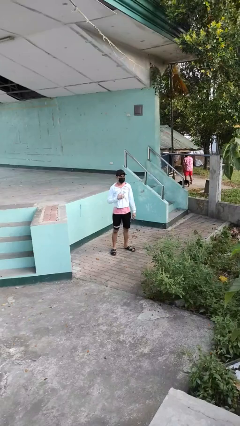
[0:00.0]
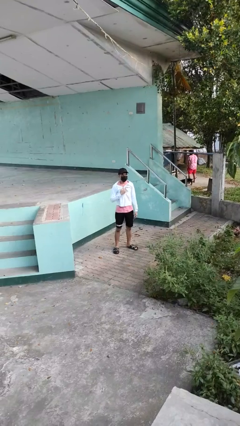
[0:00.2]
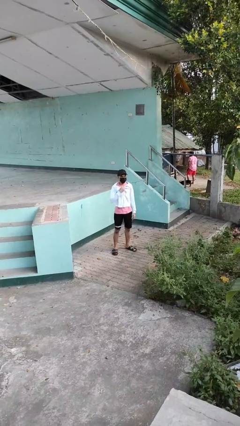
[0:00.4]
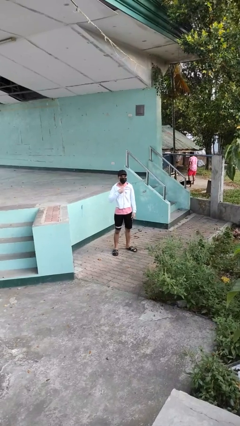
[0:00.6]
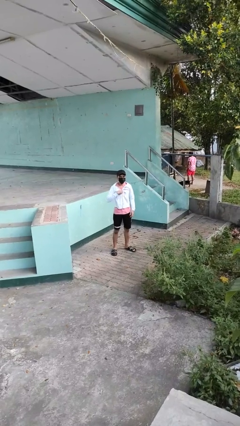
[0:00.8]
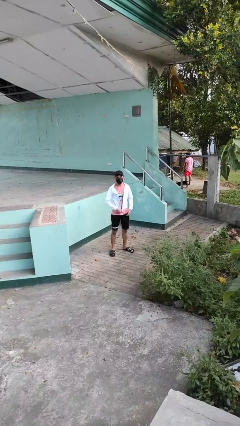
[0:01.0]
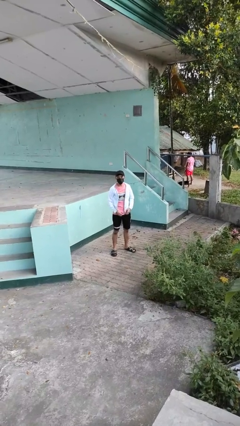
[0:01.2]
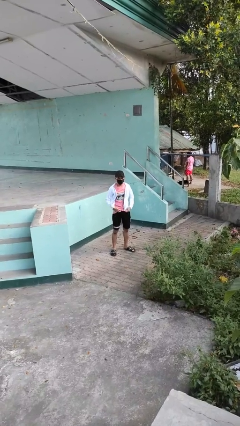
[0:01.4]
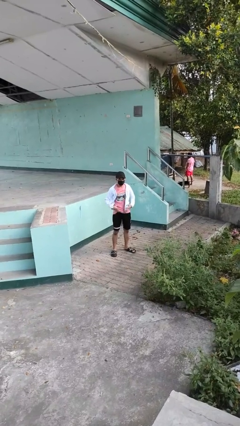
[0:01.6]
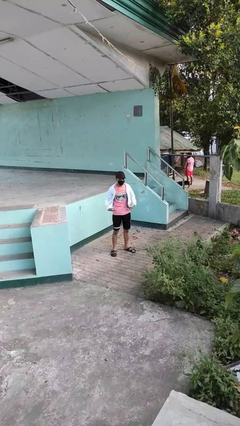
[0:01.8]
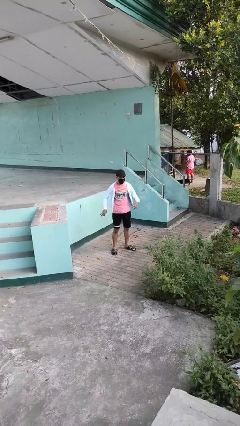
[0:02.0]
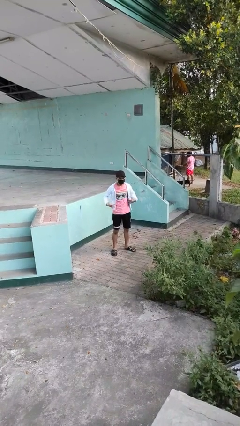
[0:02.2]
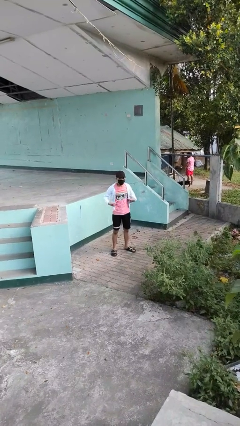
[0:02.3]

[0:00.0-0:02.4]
person unzips jacket

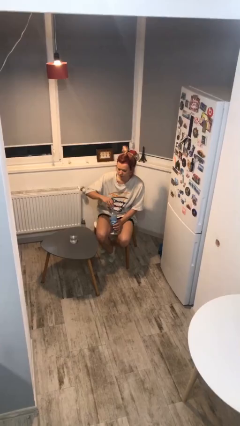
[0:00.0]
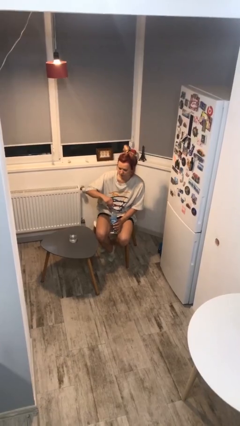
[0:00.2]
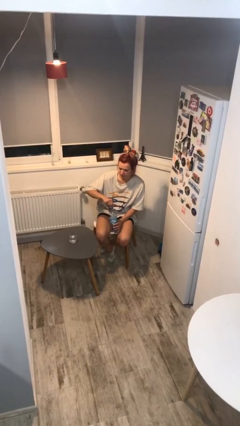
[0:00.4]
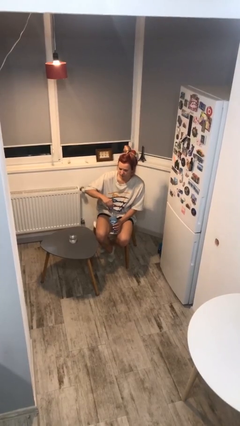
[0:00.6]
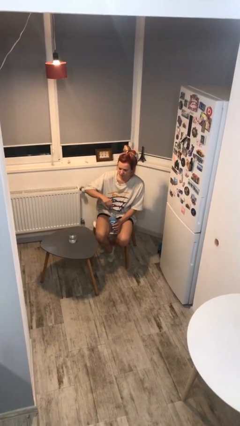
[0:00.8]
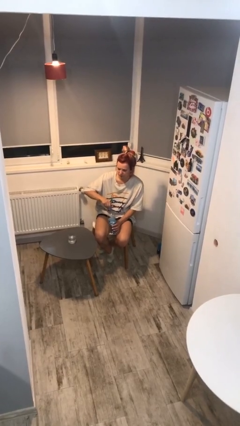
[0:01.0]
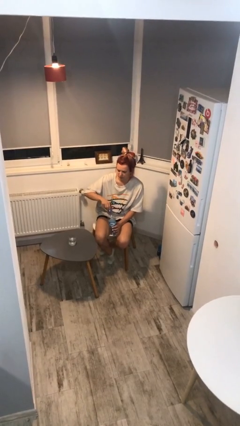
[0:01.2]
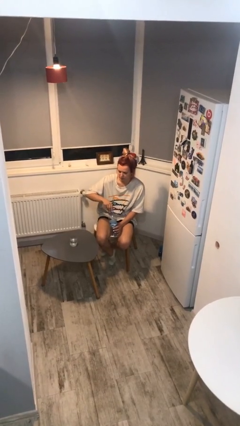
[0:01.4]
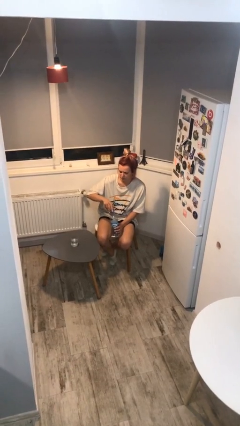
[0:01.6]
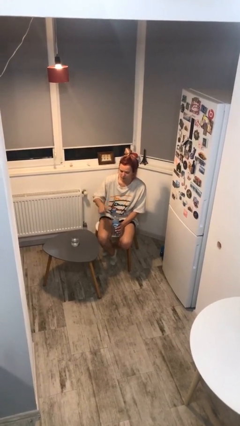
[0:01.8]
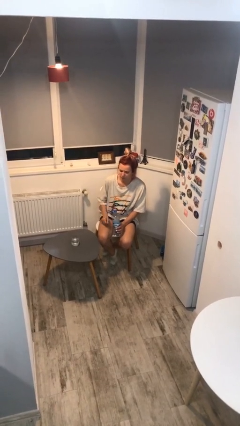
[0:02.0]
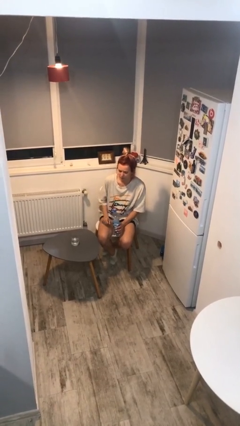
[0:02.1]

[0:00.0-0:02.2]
person screws lid to bottle

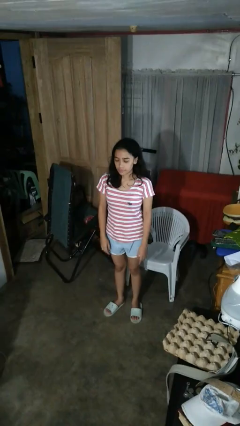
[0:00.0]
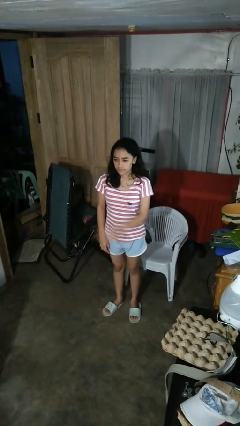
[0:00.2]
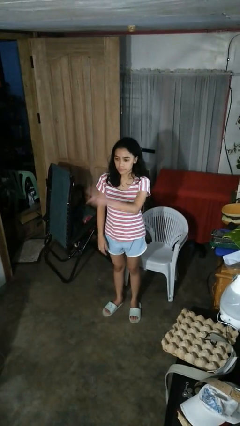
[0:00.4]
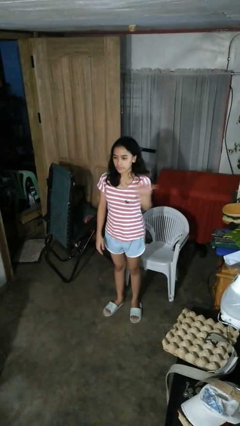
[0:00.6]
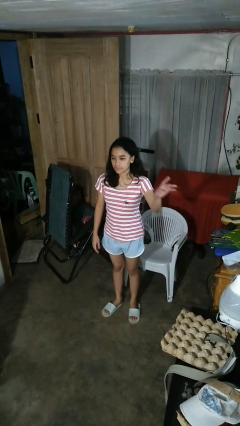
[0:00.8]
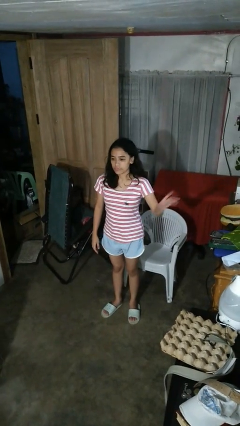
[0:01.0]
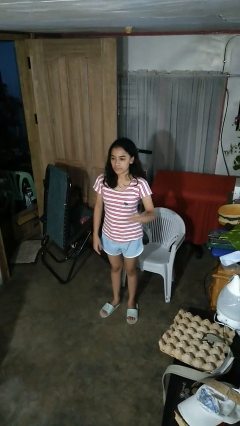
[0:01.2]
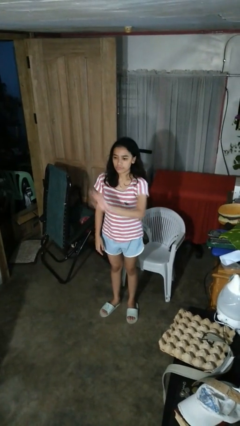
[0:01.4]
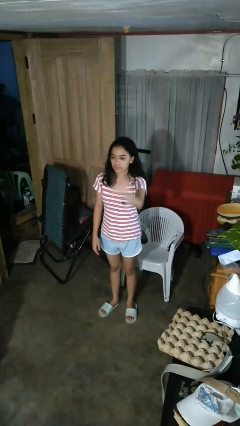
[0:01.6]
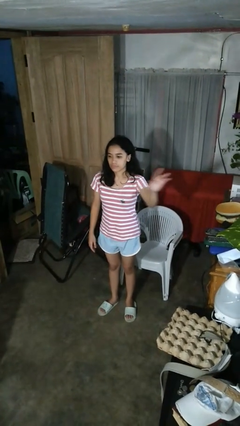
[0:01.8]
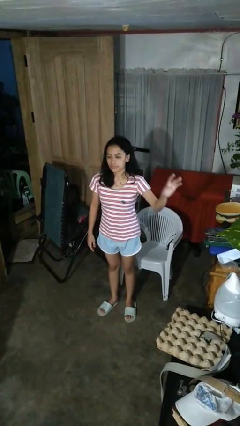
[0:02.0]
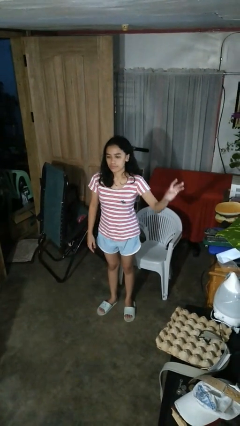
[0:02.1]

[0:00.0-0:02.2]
person gestures swipe left

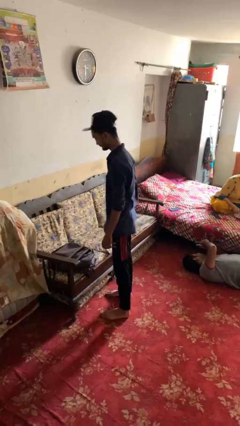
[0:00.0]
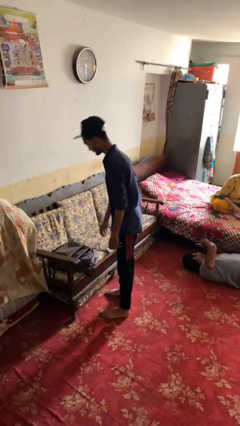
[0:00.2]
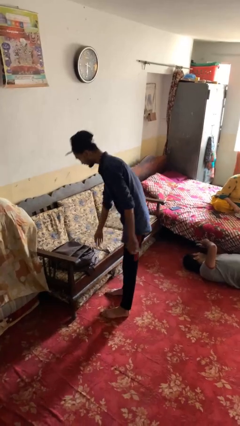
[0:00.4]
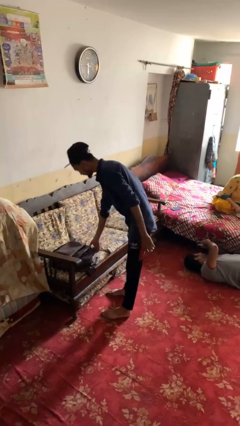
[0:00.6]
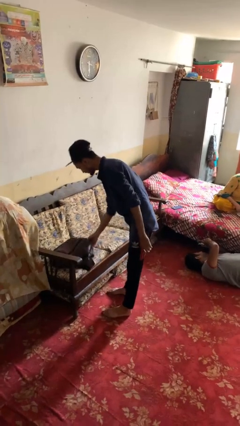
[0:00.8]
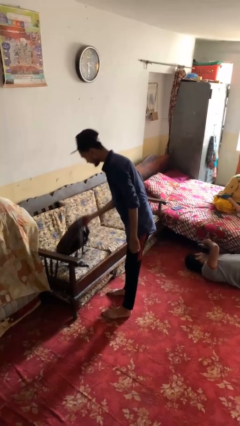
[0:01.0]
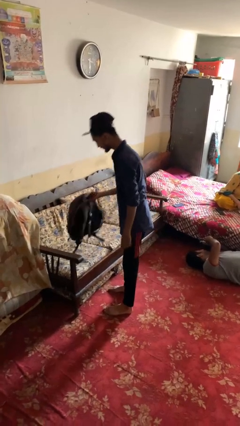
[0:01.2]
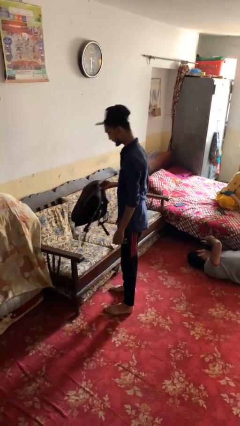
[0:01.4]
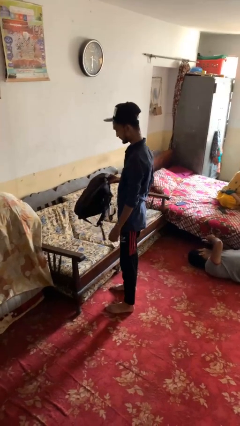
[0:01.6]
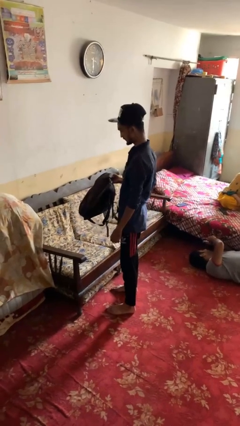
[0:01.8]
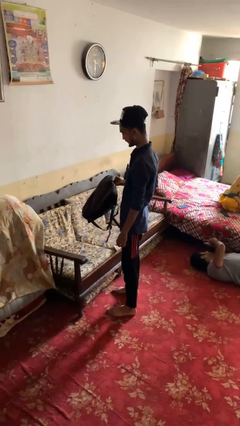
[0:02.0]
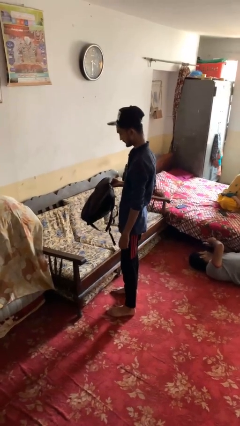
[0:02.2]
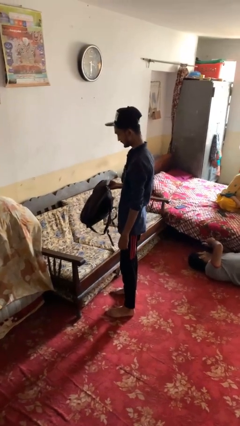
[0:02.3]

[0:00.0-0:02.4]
person picks up object from couch

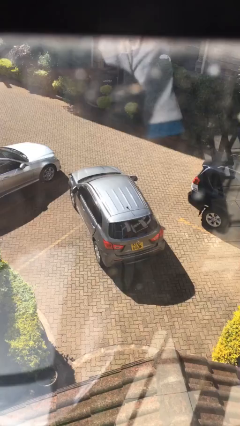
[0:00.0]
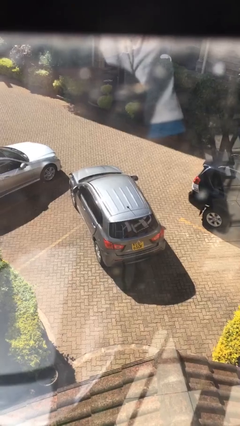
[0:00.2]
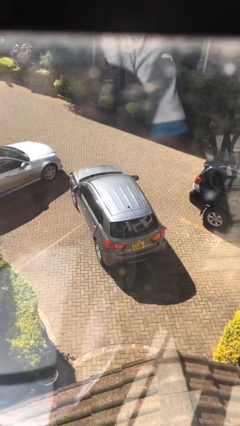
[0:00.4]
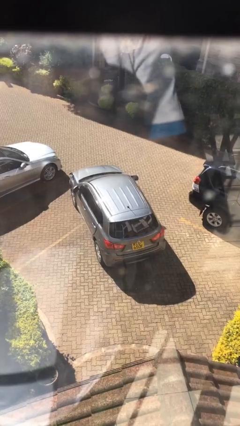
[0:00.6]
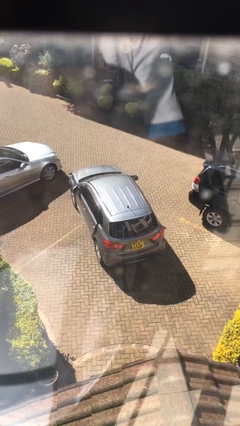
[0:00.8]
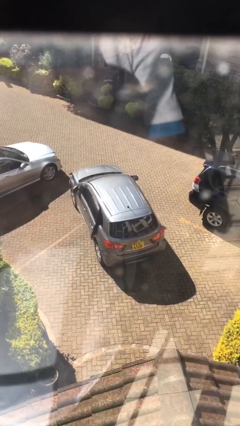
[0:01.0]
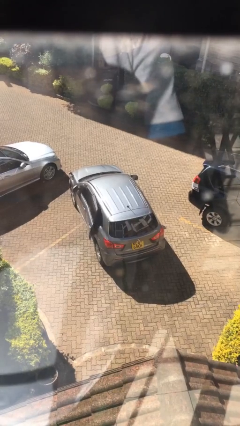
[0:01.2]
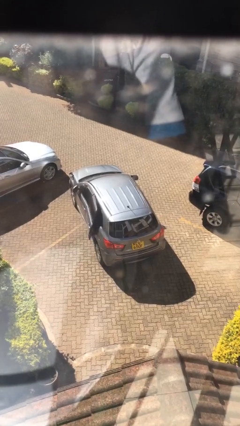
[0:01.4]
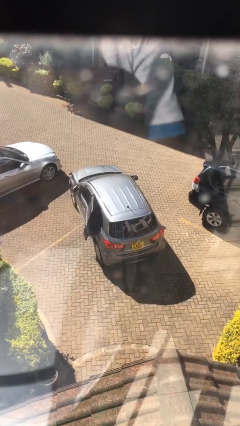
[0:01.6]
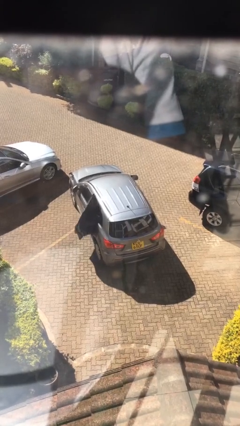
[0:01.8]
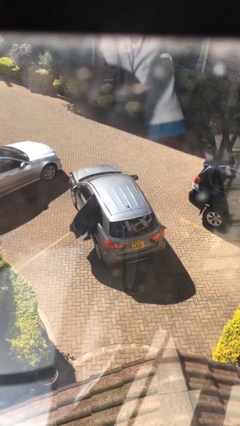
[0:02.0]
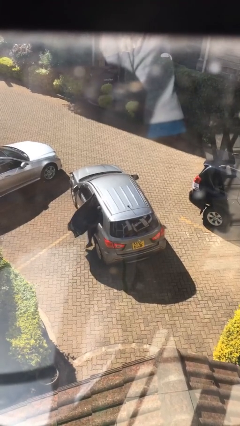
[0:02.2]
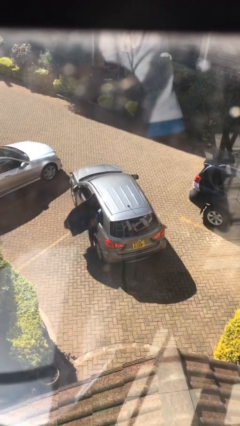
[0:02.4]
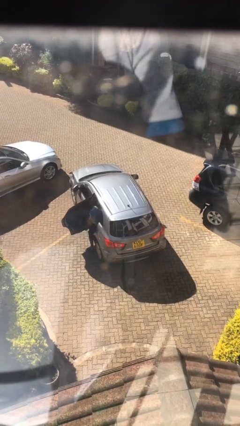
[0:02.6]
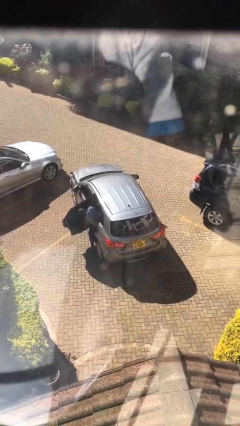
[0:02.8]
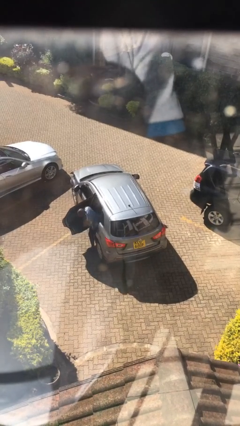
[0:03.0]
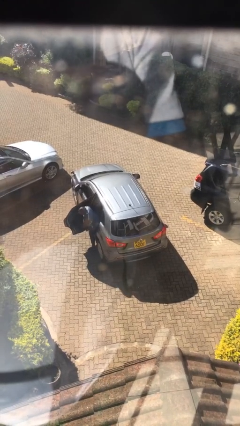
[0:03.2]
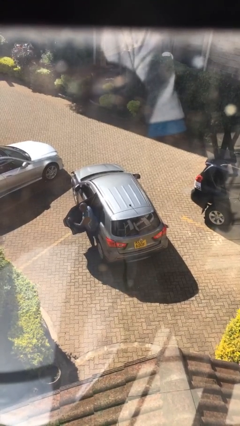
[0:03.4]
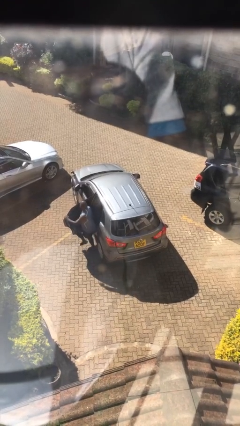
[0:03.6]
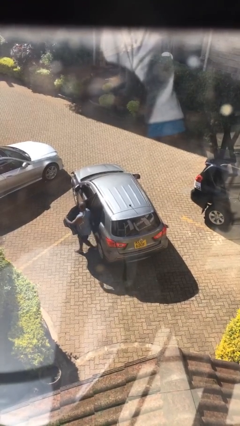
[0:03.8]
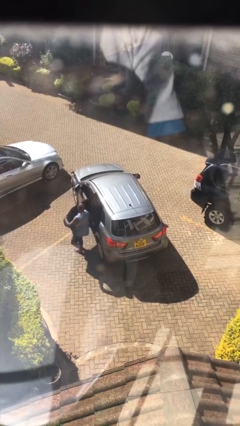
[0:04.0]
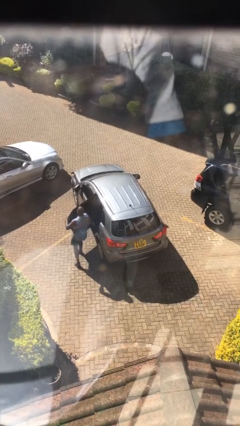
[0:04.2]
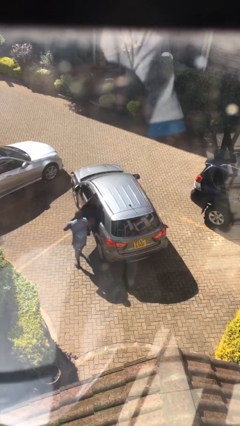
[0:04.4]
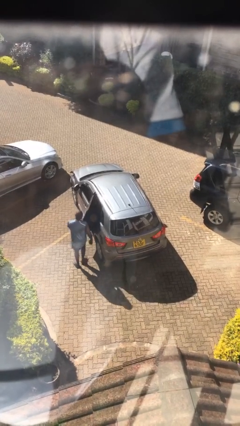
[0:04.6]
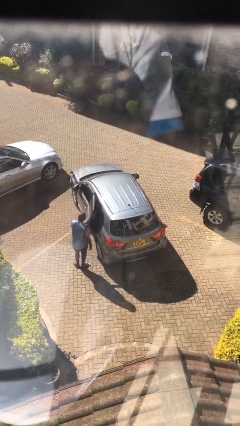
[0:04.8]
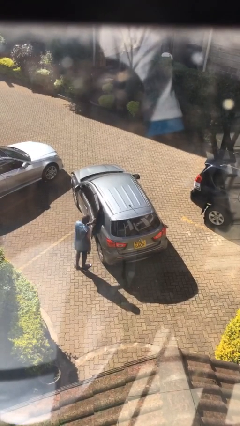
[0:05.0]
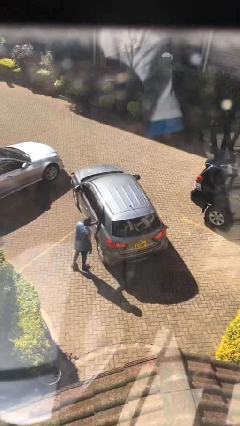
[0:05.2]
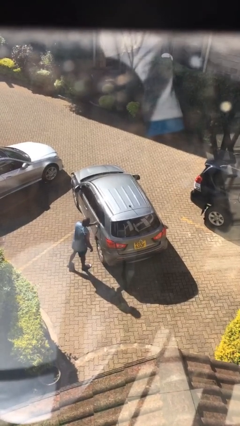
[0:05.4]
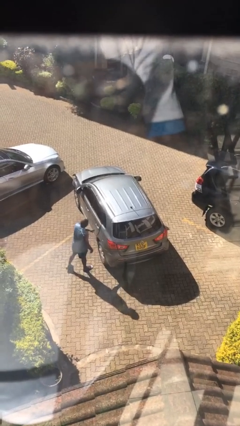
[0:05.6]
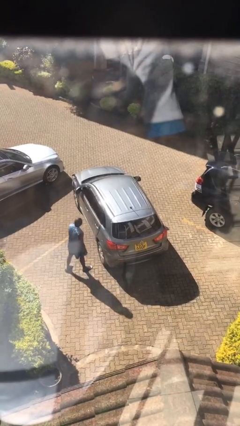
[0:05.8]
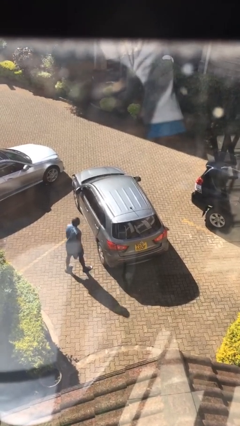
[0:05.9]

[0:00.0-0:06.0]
car drops off person

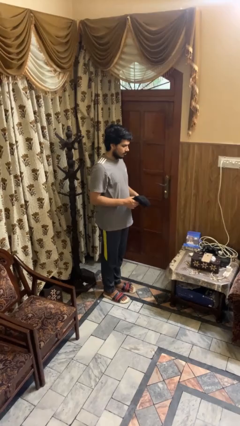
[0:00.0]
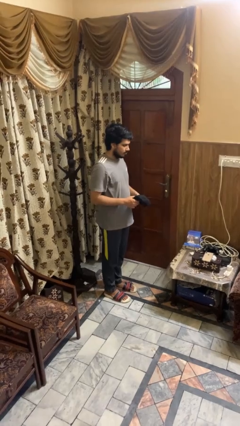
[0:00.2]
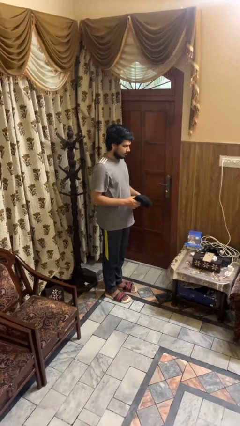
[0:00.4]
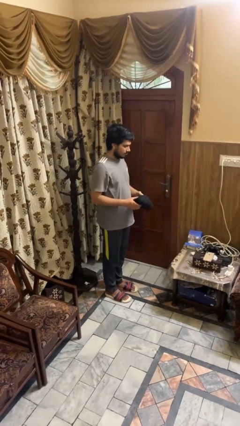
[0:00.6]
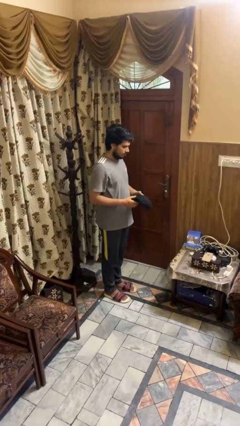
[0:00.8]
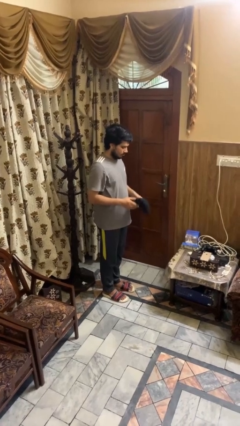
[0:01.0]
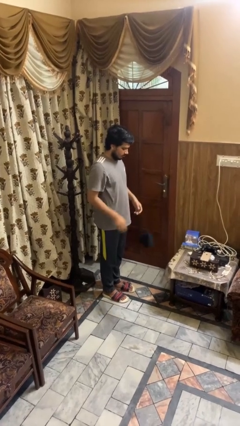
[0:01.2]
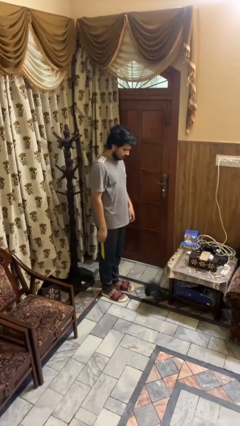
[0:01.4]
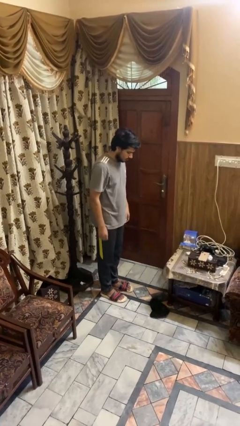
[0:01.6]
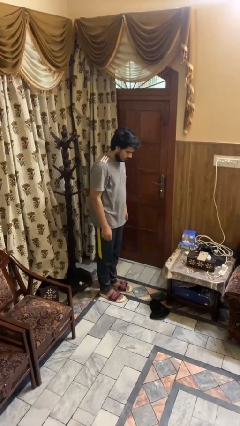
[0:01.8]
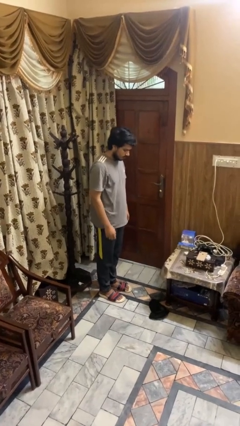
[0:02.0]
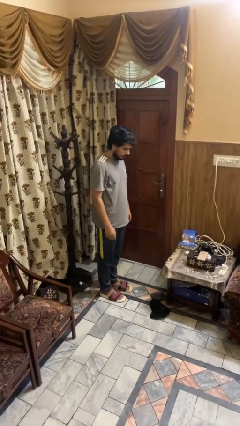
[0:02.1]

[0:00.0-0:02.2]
person drops object
